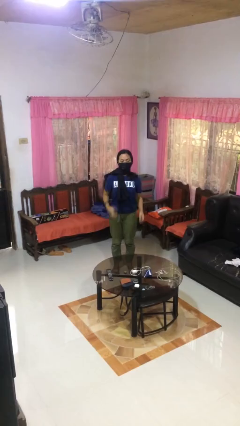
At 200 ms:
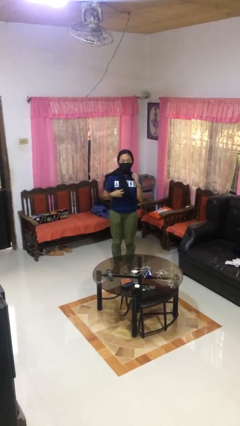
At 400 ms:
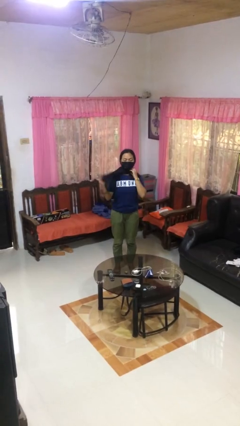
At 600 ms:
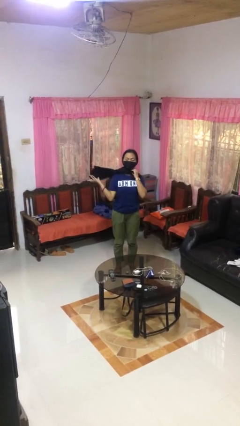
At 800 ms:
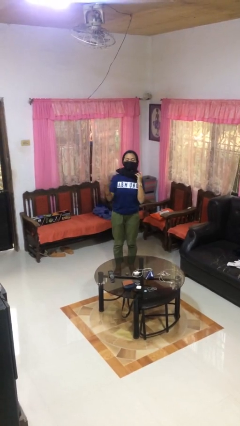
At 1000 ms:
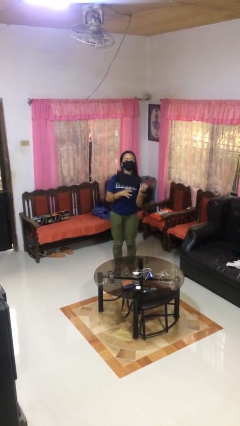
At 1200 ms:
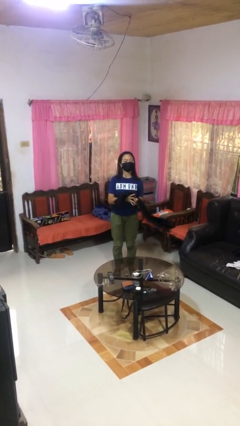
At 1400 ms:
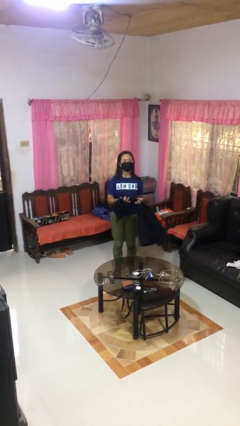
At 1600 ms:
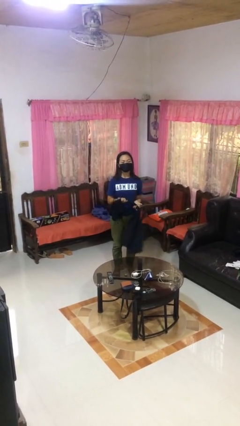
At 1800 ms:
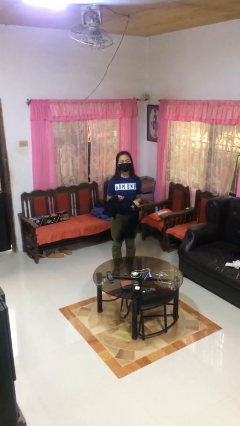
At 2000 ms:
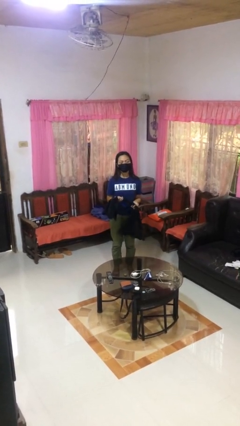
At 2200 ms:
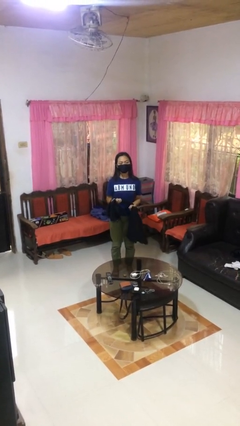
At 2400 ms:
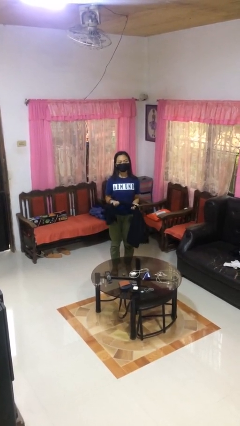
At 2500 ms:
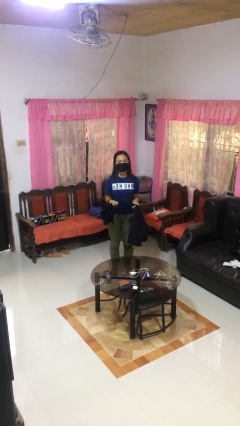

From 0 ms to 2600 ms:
person takes off scarf

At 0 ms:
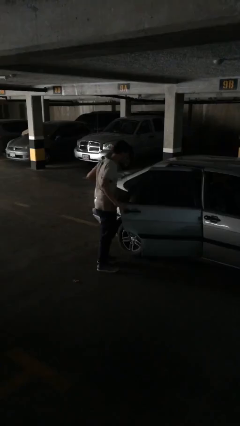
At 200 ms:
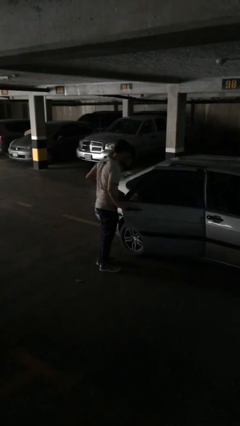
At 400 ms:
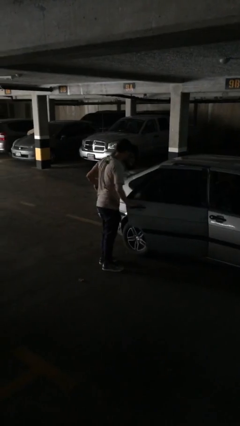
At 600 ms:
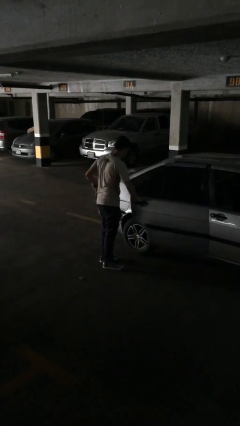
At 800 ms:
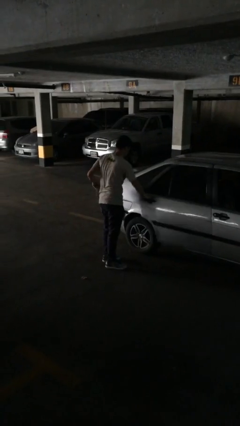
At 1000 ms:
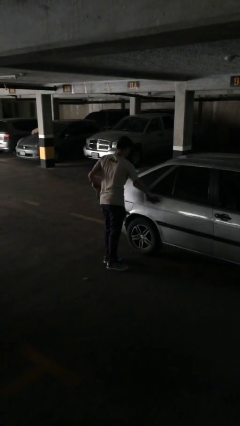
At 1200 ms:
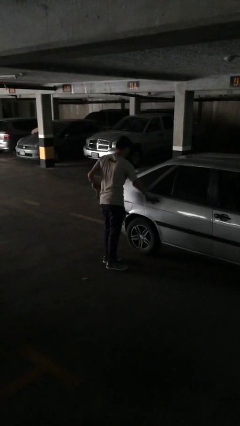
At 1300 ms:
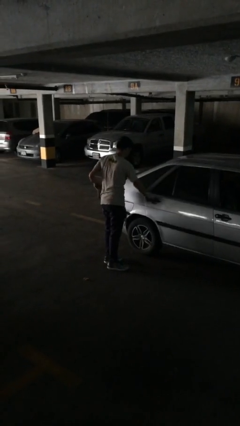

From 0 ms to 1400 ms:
person closes car door

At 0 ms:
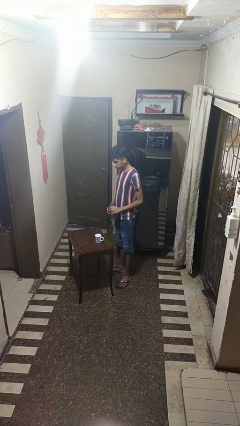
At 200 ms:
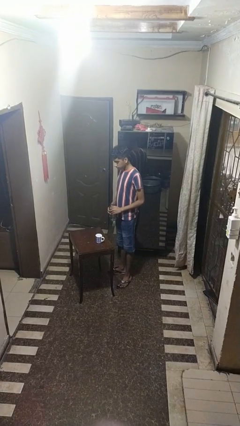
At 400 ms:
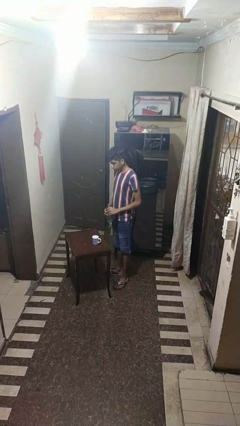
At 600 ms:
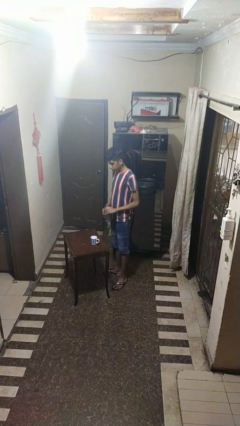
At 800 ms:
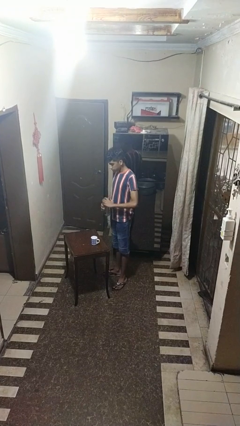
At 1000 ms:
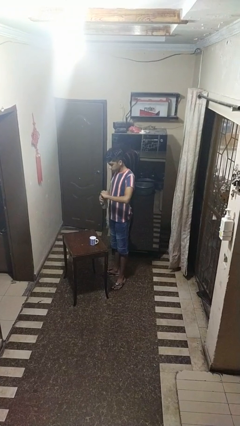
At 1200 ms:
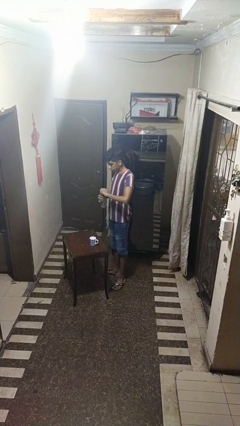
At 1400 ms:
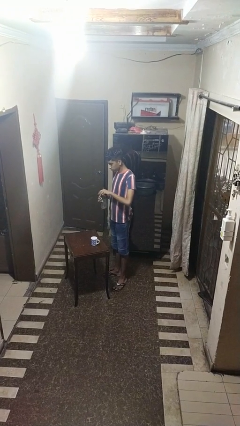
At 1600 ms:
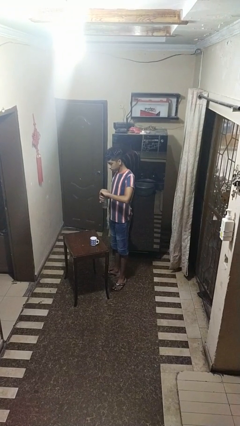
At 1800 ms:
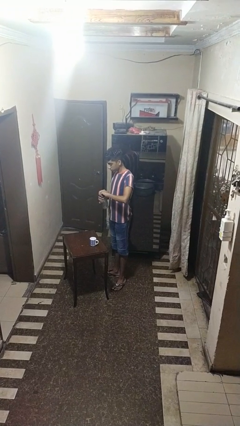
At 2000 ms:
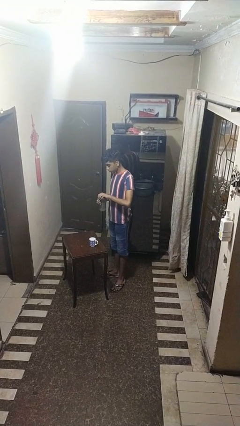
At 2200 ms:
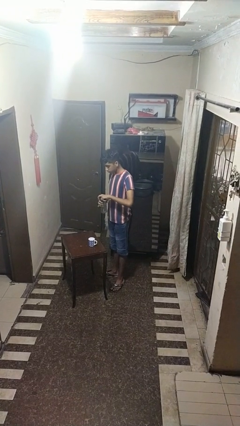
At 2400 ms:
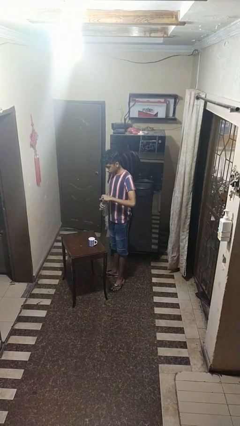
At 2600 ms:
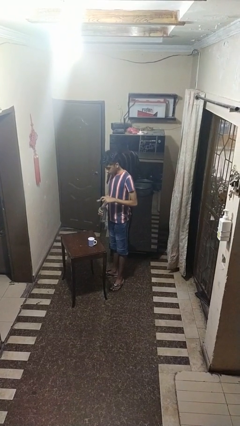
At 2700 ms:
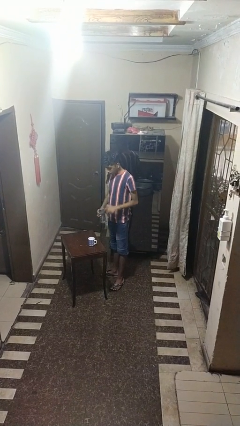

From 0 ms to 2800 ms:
person unscrews lid from bottle

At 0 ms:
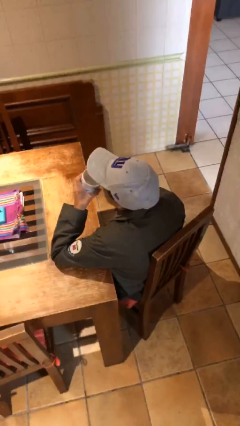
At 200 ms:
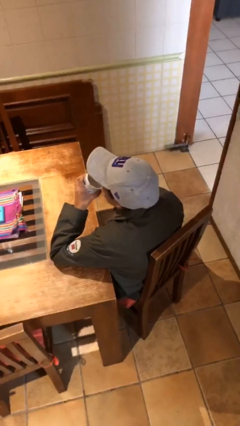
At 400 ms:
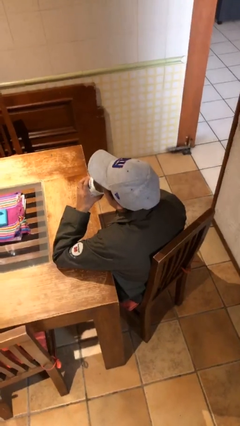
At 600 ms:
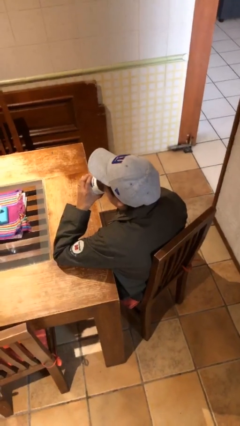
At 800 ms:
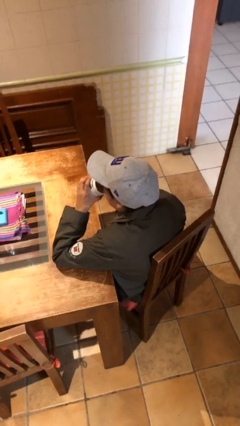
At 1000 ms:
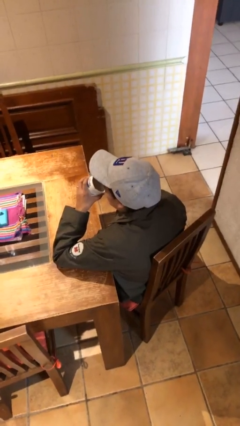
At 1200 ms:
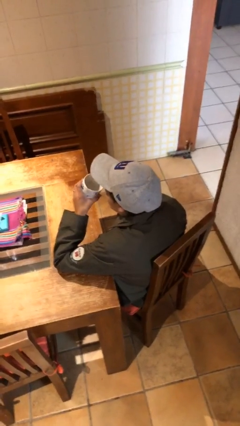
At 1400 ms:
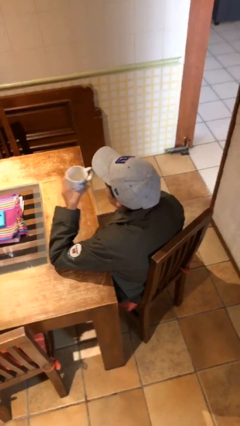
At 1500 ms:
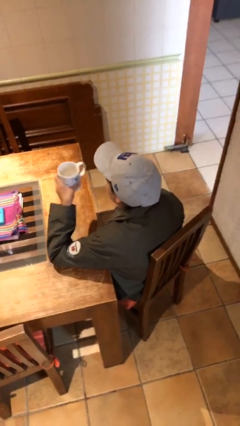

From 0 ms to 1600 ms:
person drinks from mug

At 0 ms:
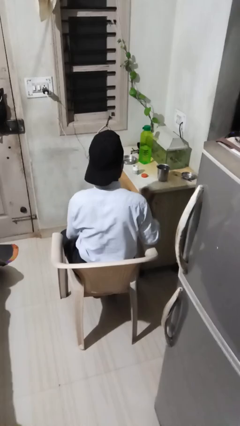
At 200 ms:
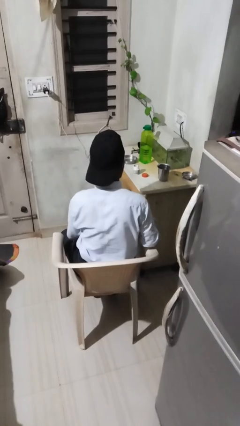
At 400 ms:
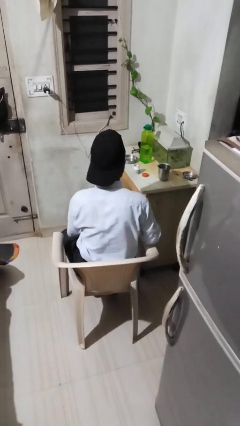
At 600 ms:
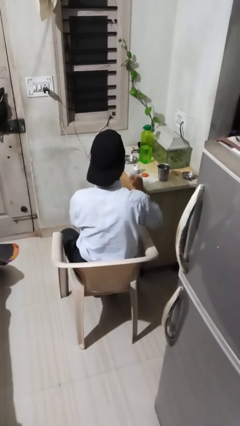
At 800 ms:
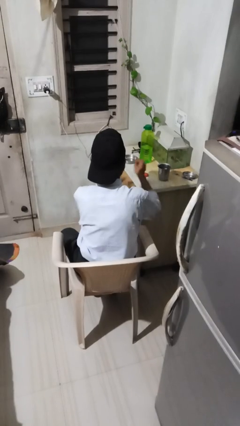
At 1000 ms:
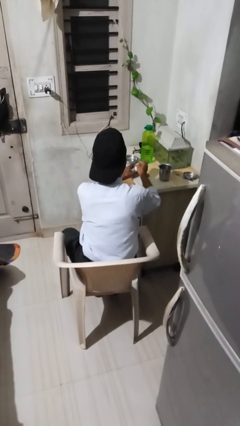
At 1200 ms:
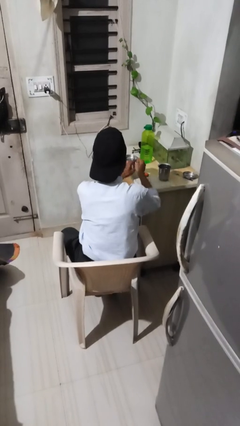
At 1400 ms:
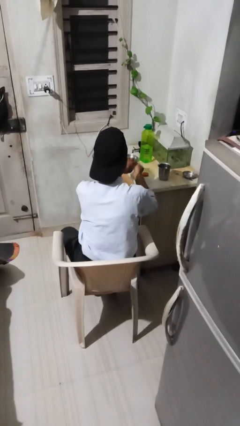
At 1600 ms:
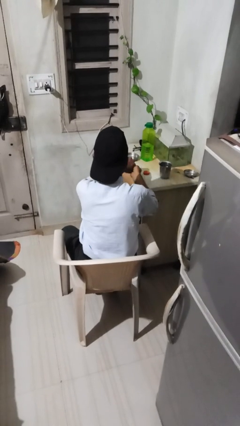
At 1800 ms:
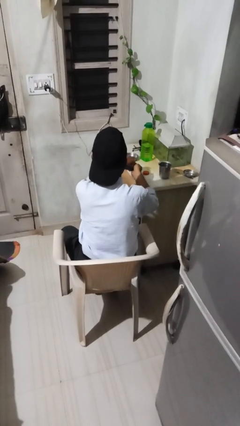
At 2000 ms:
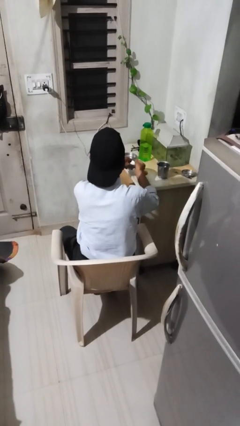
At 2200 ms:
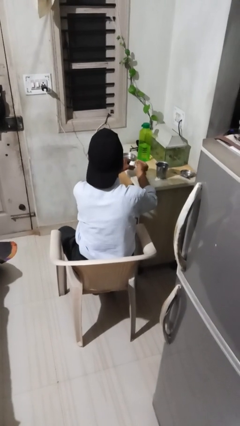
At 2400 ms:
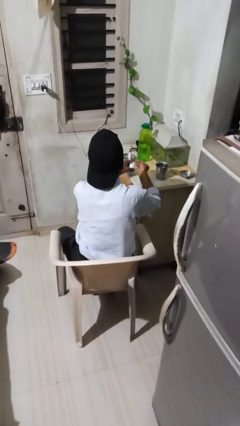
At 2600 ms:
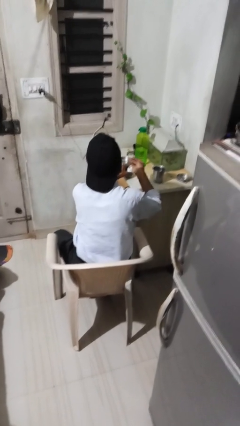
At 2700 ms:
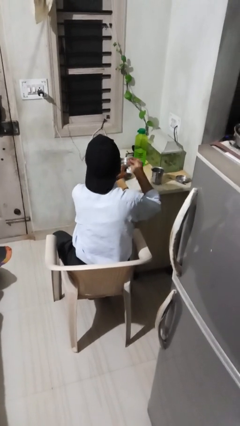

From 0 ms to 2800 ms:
person takes medicine pills

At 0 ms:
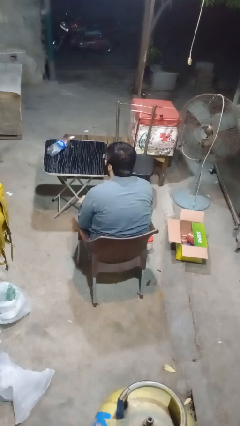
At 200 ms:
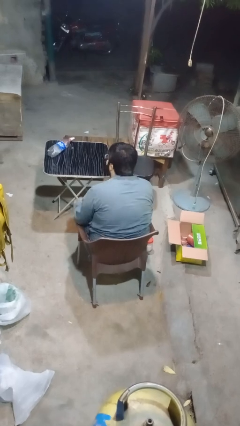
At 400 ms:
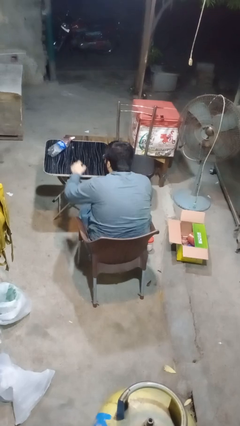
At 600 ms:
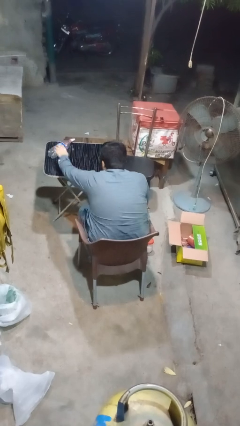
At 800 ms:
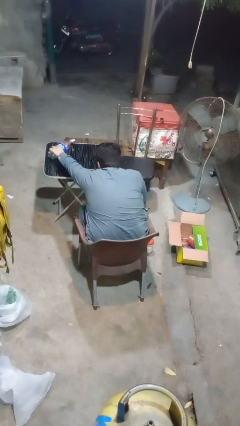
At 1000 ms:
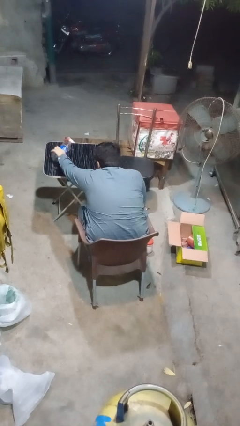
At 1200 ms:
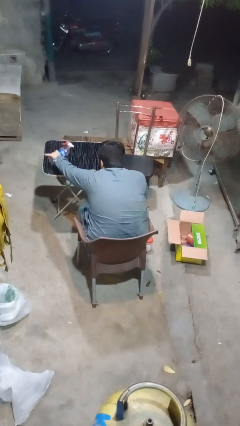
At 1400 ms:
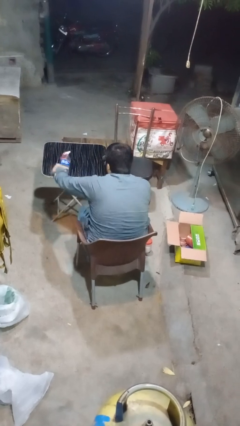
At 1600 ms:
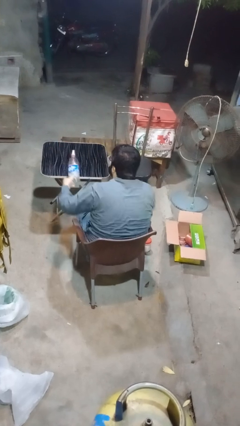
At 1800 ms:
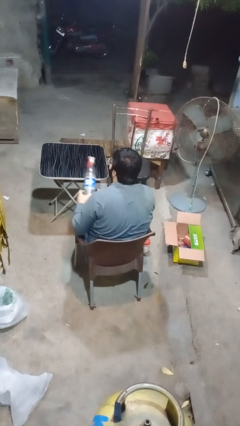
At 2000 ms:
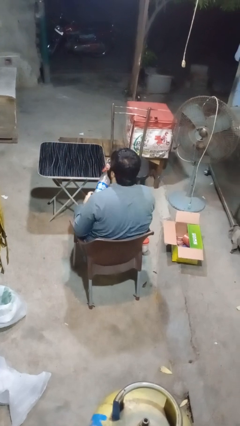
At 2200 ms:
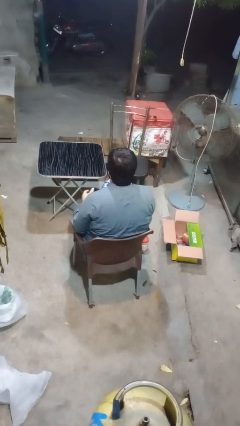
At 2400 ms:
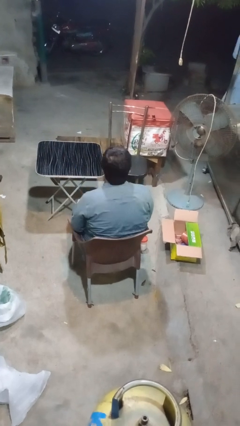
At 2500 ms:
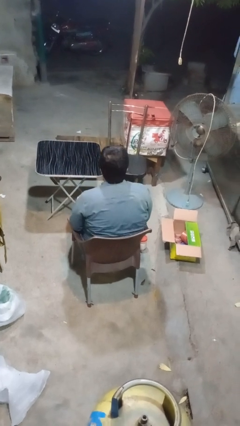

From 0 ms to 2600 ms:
person picks up object from table

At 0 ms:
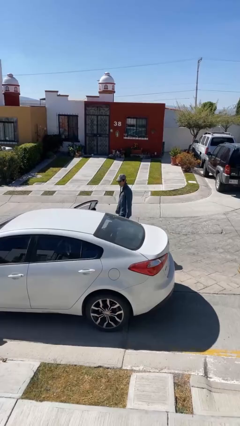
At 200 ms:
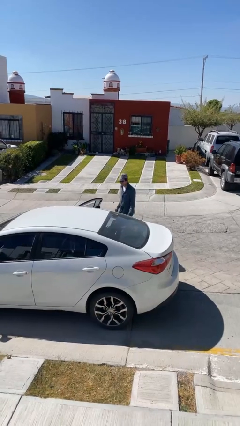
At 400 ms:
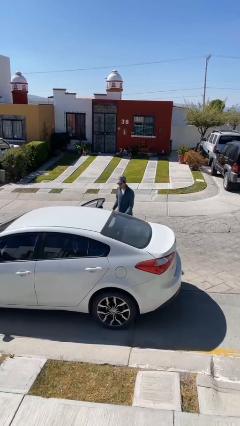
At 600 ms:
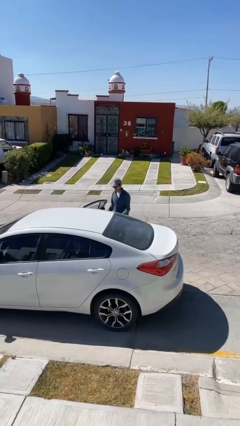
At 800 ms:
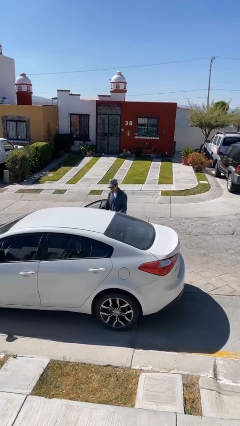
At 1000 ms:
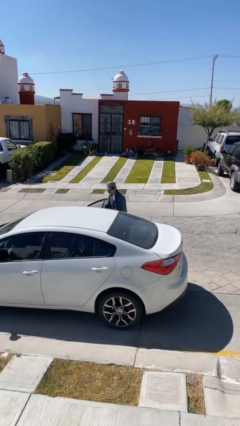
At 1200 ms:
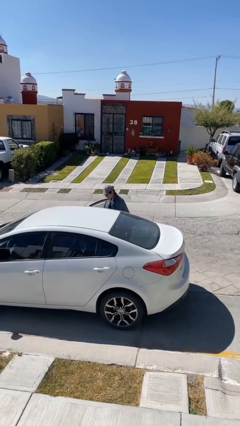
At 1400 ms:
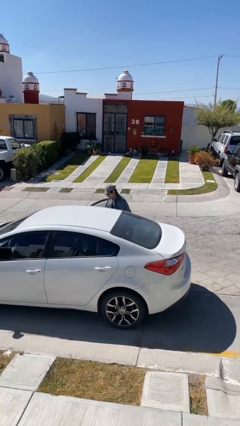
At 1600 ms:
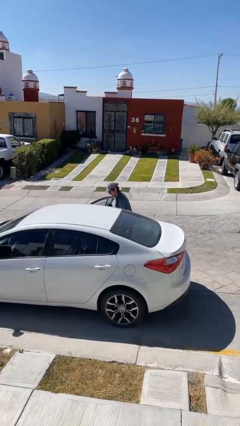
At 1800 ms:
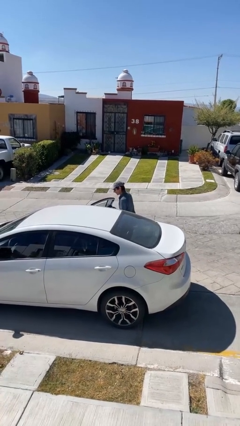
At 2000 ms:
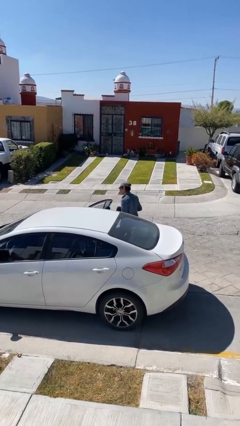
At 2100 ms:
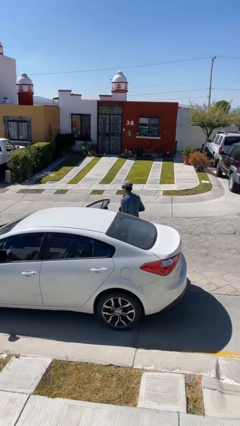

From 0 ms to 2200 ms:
person unloads car

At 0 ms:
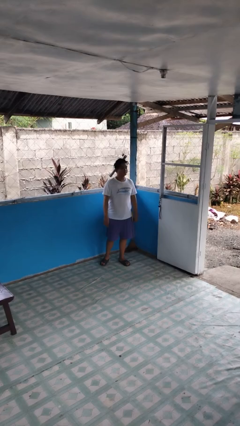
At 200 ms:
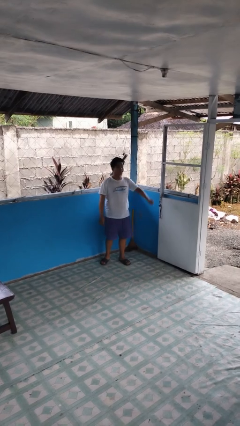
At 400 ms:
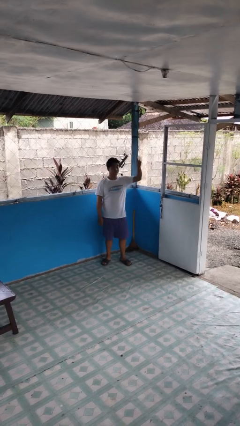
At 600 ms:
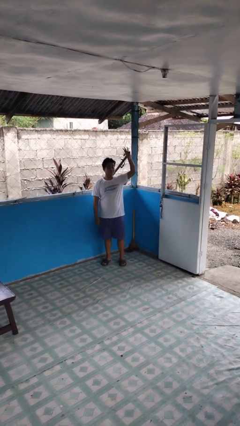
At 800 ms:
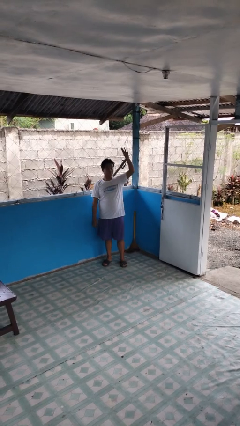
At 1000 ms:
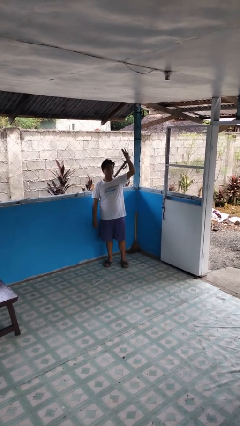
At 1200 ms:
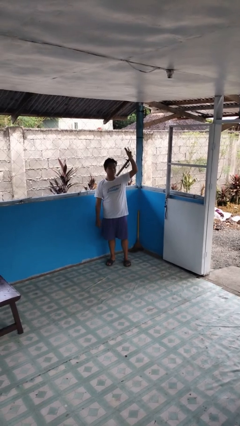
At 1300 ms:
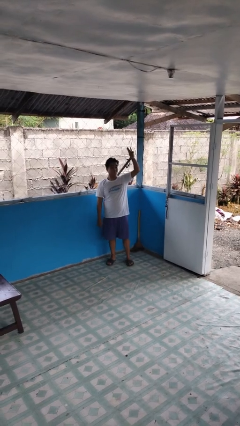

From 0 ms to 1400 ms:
person gestures number three
